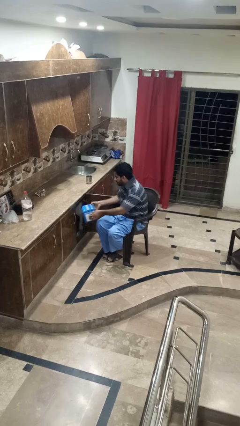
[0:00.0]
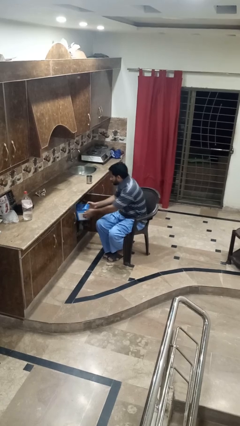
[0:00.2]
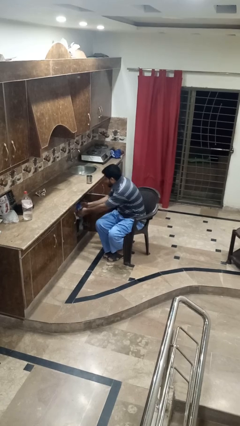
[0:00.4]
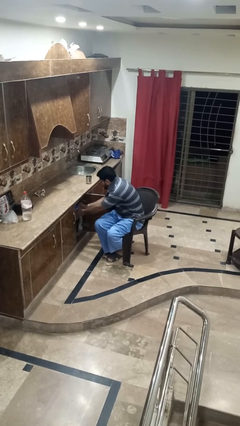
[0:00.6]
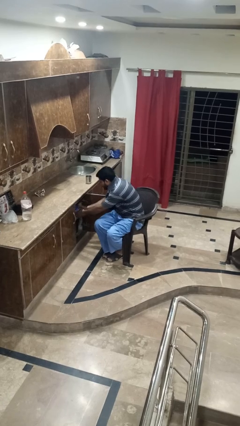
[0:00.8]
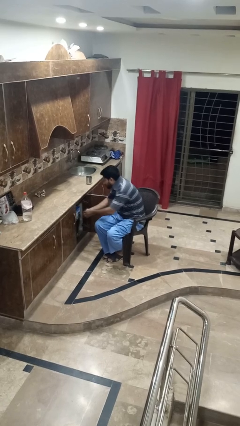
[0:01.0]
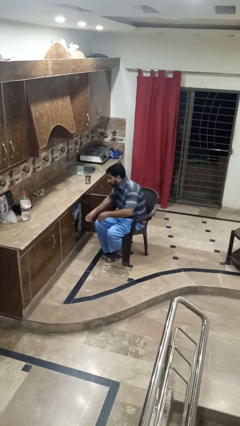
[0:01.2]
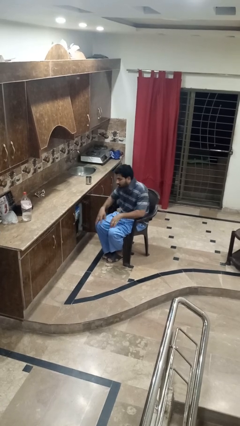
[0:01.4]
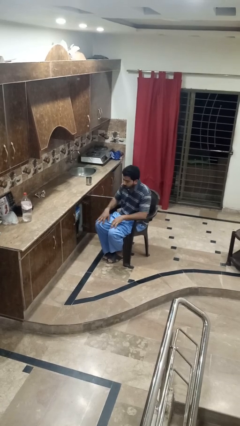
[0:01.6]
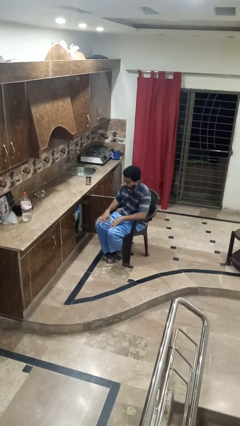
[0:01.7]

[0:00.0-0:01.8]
person puts down object into cabinet

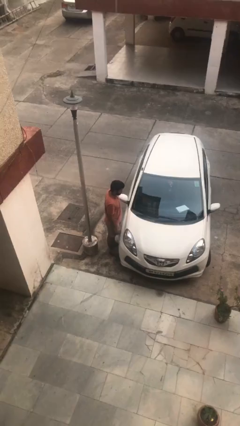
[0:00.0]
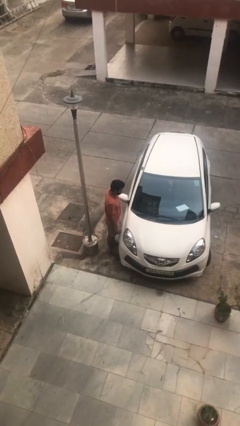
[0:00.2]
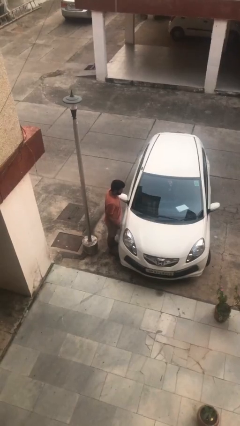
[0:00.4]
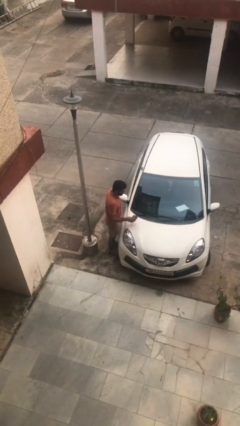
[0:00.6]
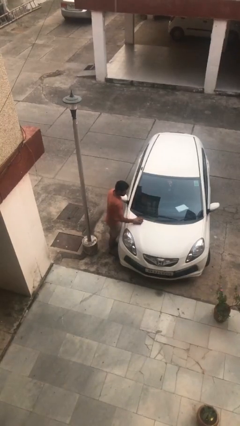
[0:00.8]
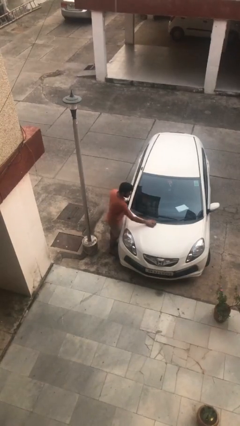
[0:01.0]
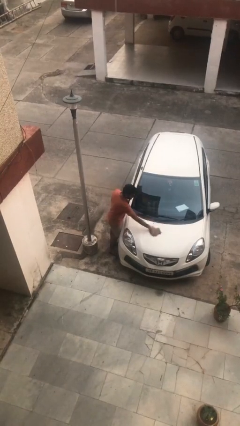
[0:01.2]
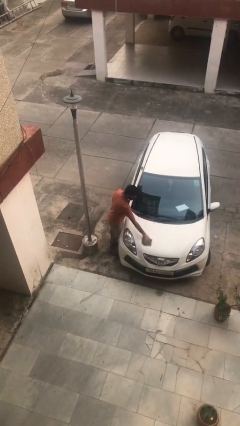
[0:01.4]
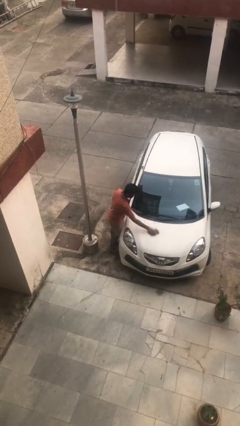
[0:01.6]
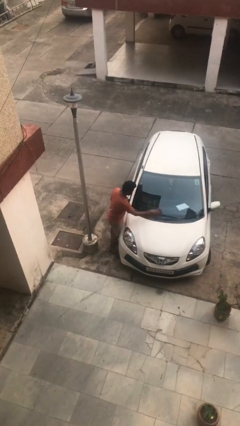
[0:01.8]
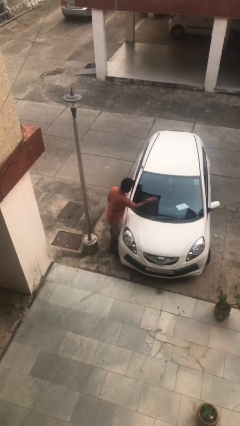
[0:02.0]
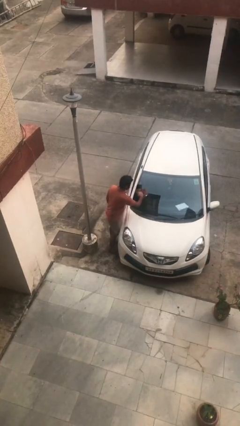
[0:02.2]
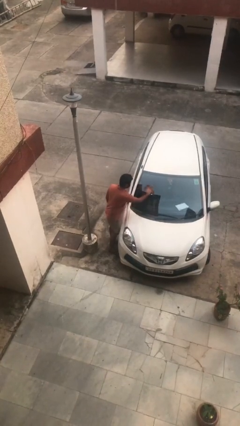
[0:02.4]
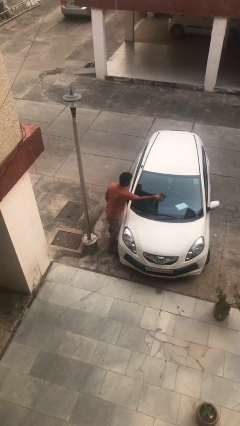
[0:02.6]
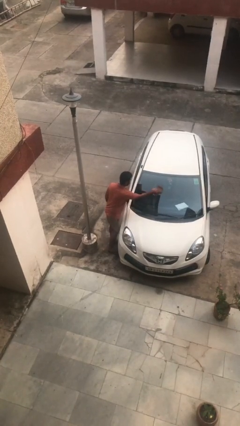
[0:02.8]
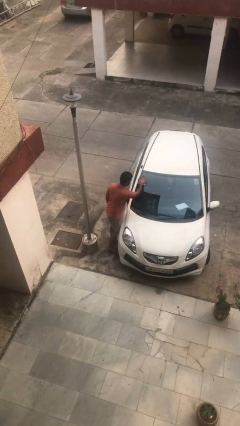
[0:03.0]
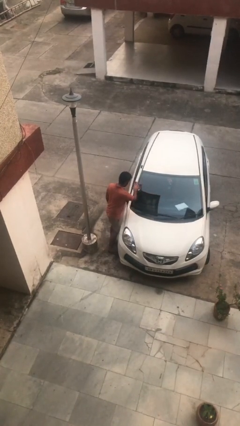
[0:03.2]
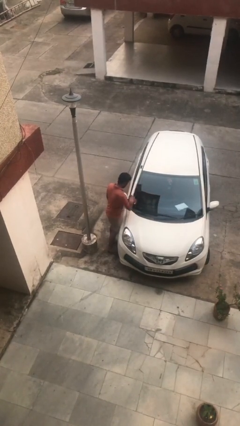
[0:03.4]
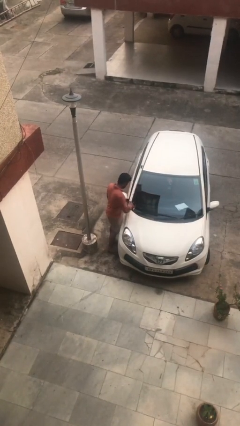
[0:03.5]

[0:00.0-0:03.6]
person polishes car with rag

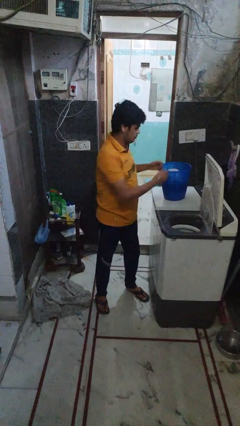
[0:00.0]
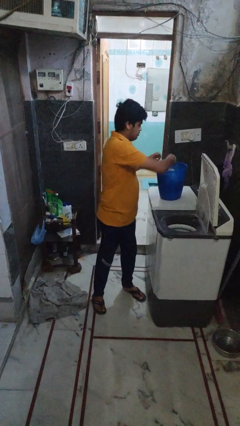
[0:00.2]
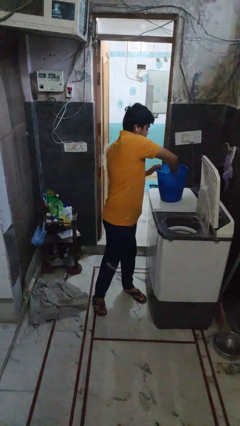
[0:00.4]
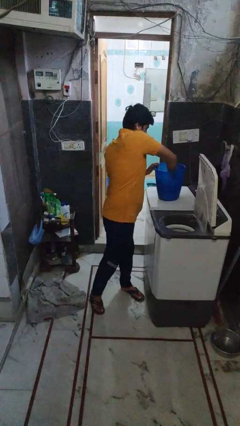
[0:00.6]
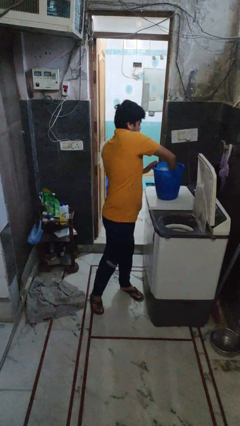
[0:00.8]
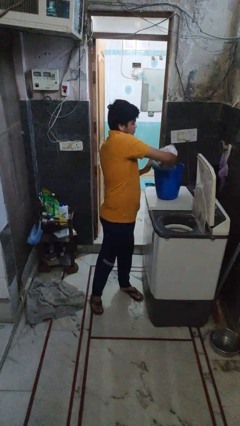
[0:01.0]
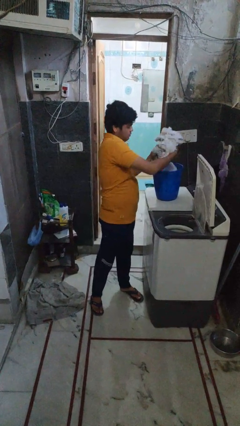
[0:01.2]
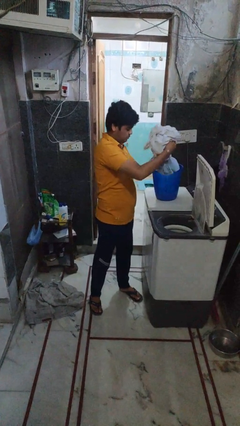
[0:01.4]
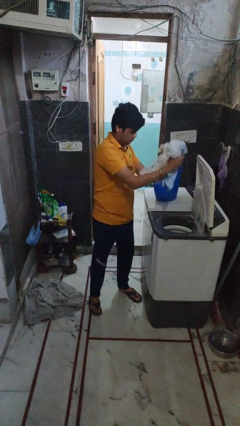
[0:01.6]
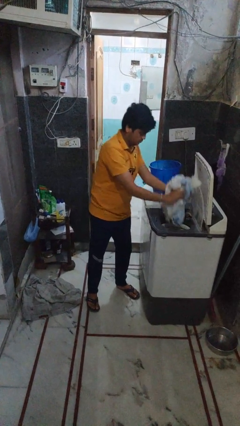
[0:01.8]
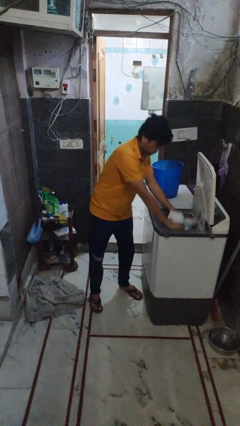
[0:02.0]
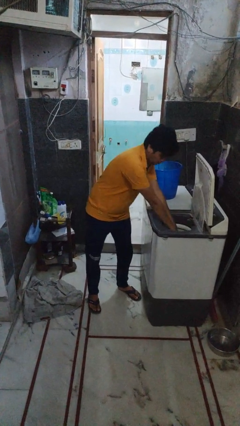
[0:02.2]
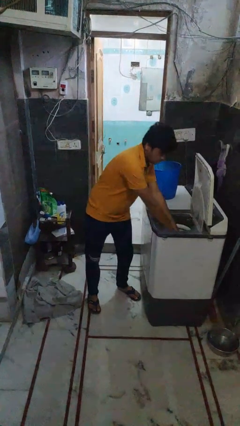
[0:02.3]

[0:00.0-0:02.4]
person loads clotheswasher

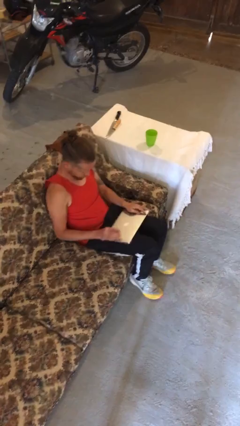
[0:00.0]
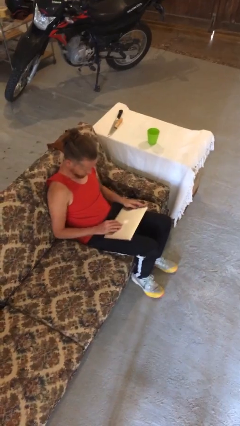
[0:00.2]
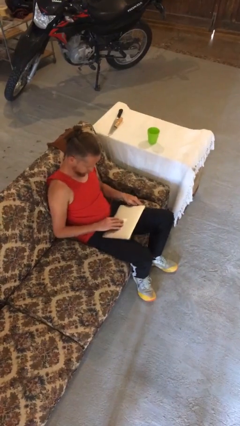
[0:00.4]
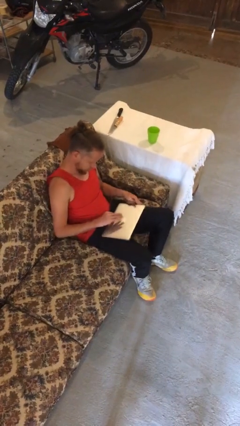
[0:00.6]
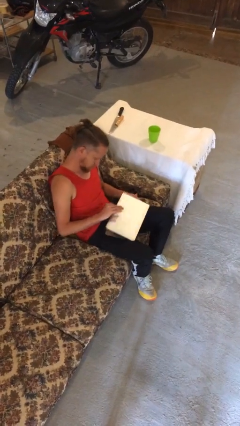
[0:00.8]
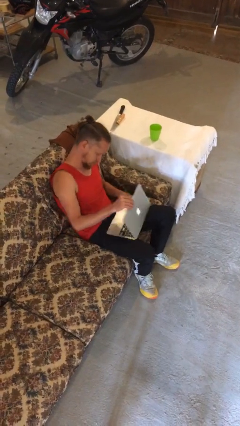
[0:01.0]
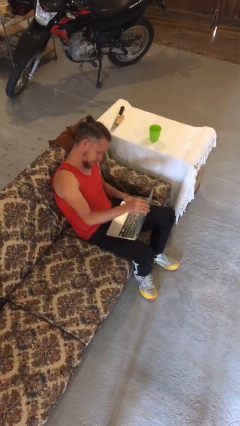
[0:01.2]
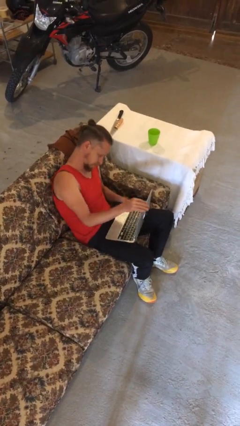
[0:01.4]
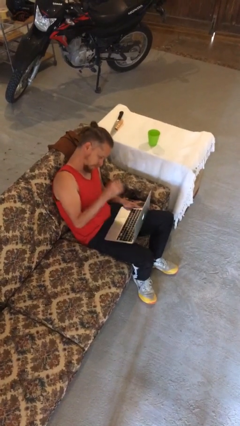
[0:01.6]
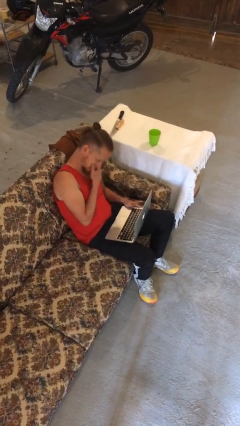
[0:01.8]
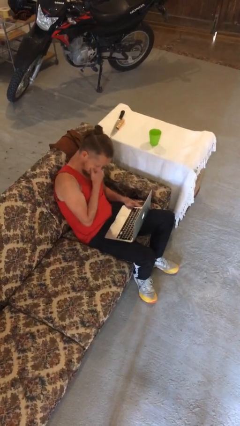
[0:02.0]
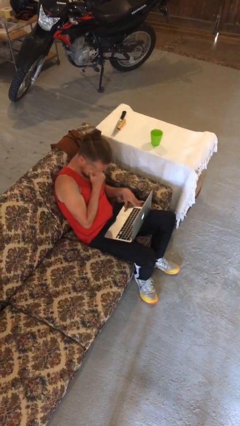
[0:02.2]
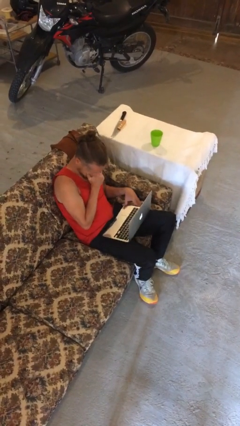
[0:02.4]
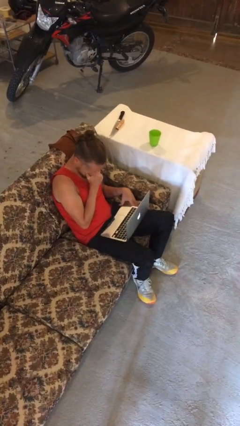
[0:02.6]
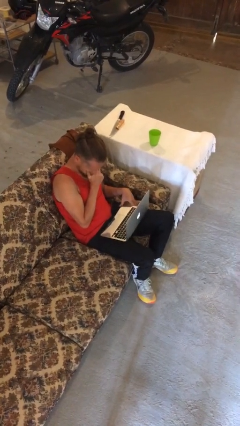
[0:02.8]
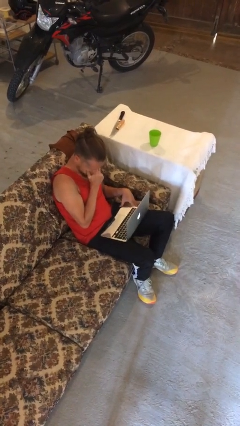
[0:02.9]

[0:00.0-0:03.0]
person opens laptop

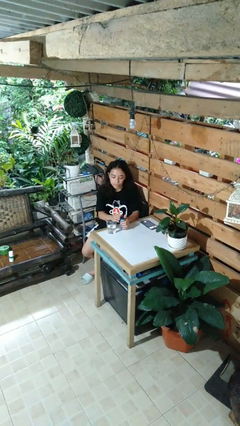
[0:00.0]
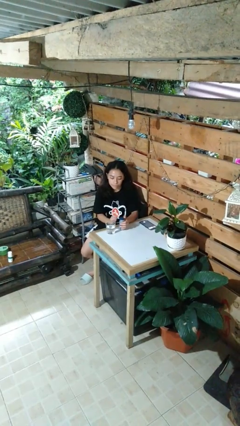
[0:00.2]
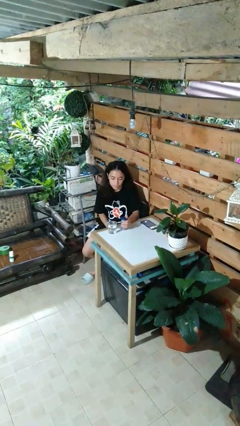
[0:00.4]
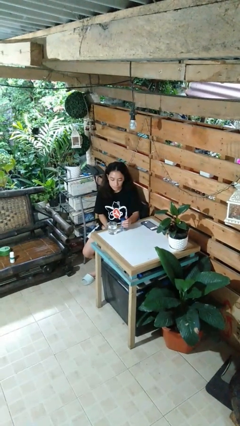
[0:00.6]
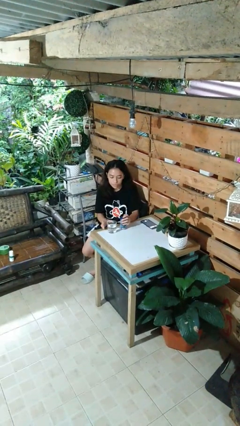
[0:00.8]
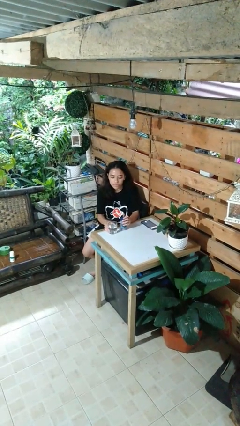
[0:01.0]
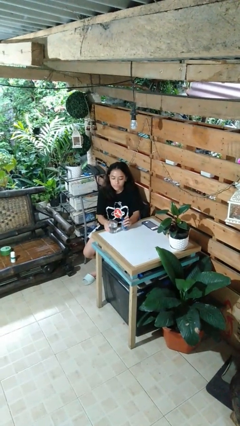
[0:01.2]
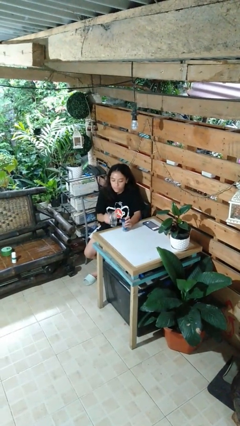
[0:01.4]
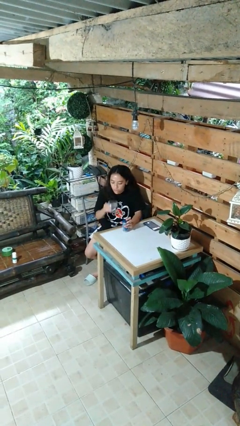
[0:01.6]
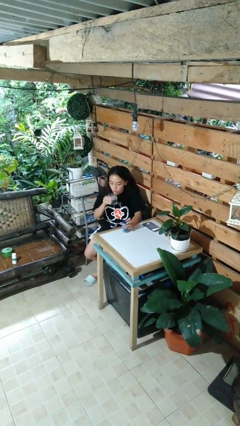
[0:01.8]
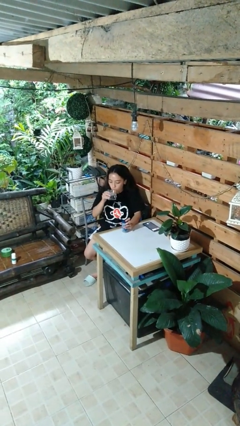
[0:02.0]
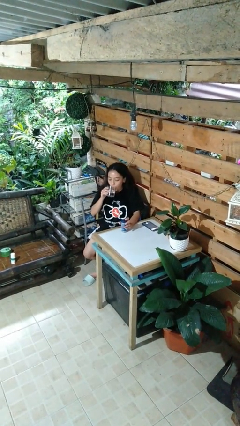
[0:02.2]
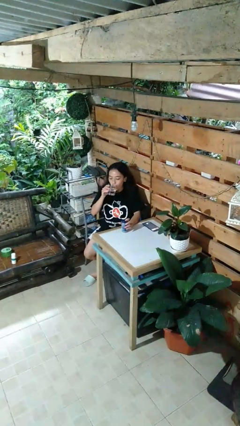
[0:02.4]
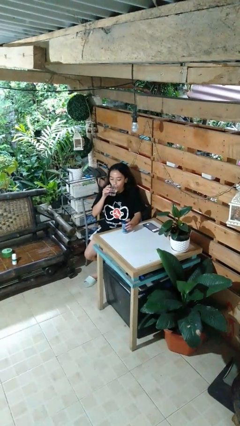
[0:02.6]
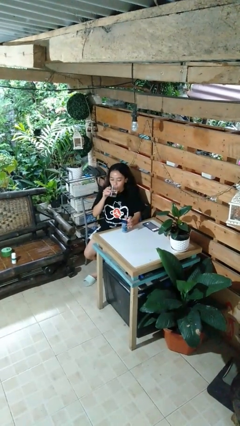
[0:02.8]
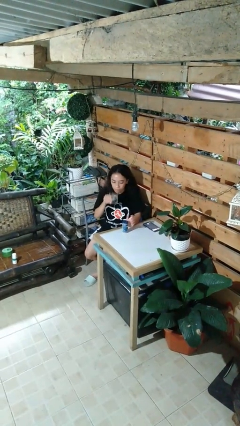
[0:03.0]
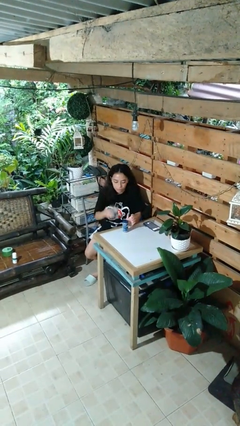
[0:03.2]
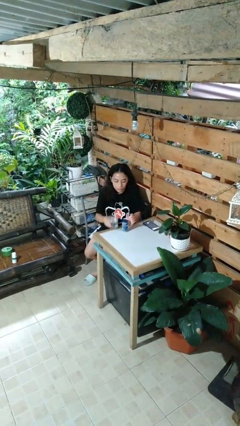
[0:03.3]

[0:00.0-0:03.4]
person drinks from cup

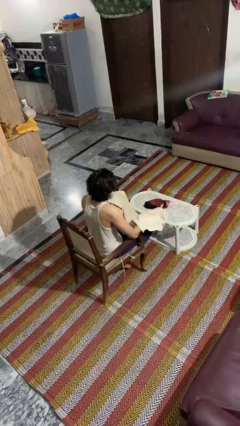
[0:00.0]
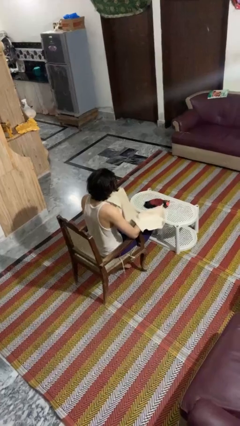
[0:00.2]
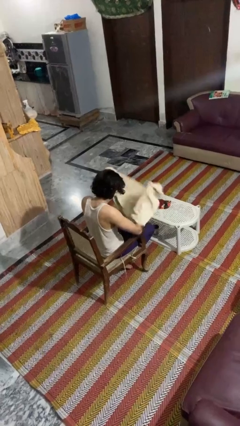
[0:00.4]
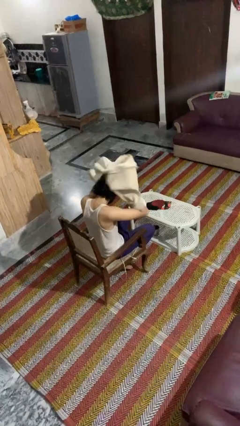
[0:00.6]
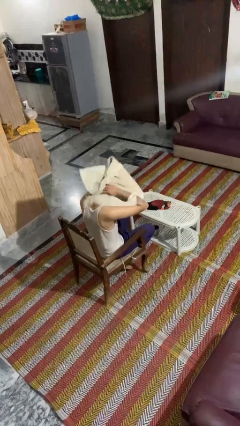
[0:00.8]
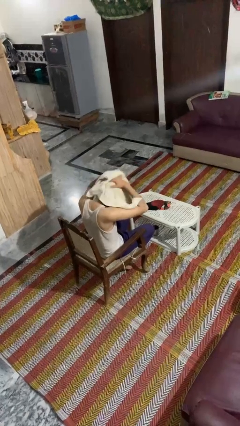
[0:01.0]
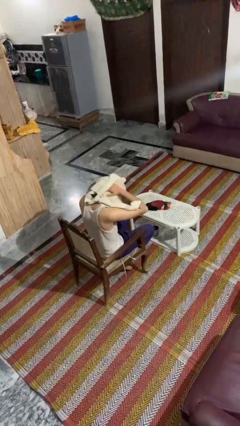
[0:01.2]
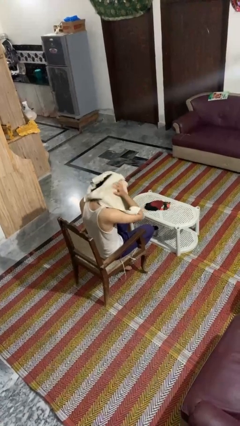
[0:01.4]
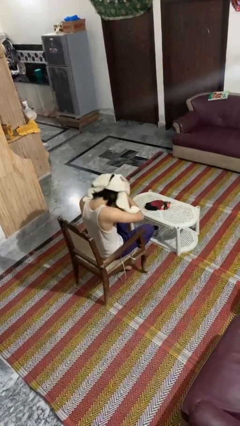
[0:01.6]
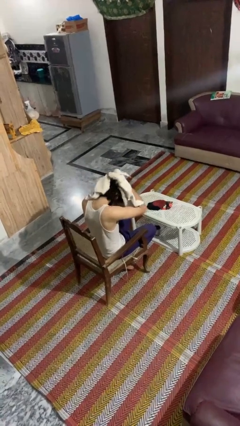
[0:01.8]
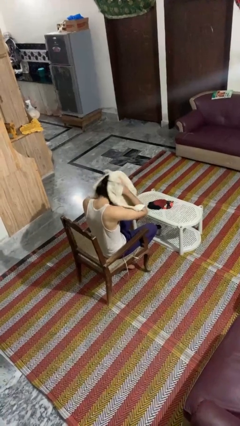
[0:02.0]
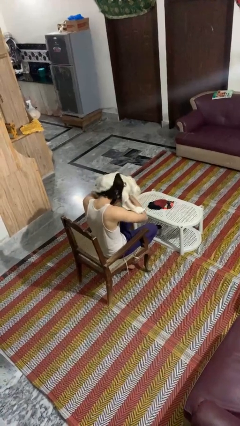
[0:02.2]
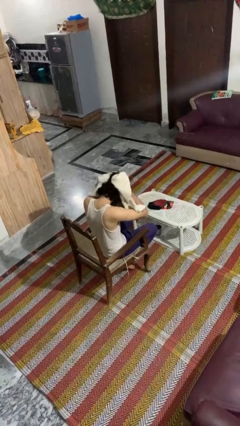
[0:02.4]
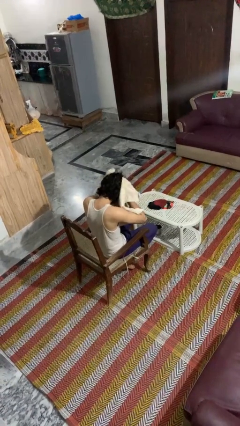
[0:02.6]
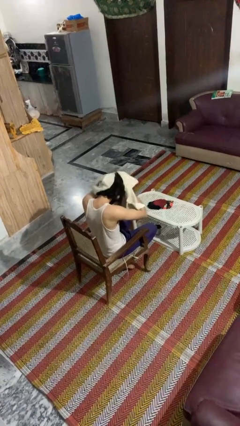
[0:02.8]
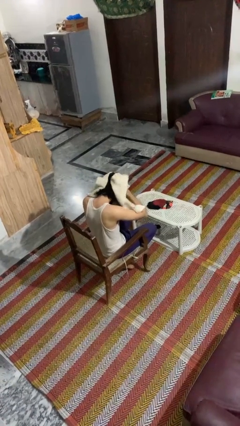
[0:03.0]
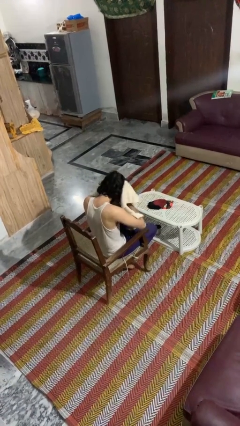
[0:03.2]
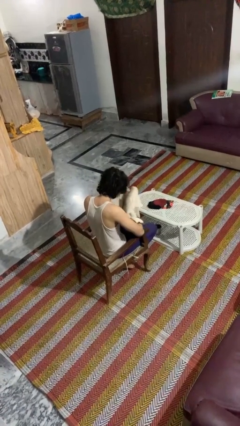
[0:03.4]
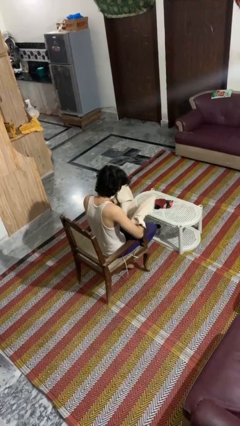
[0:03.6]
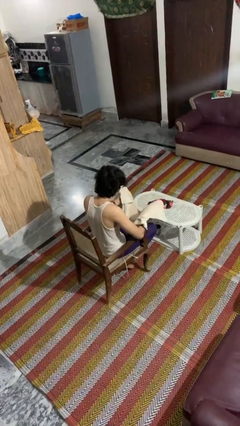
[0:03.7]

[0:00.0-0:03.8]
person dries hair with towel
